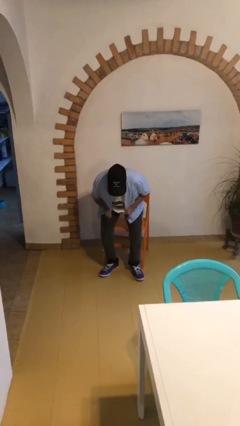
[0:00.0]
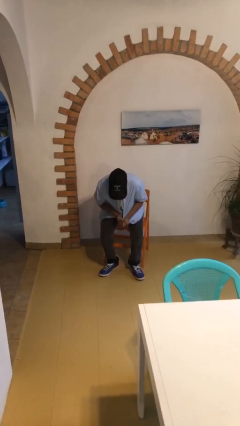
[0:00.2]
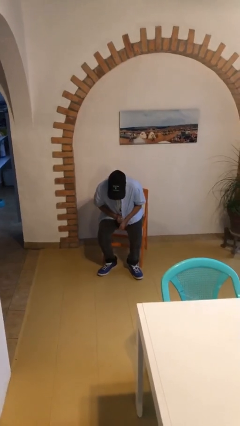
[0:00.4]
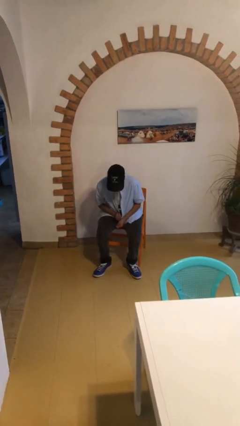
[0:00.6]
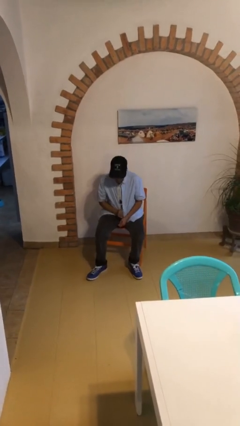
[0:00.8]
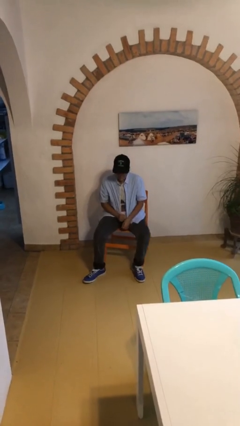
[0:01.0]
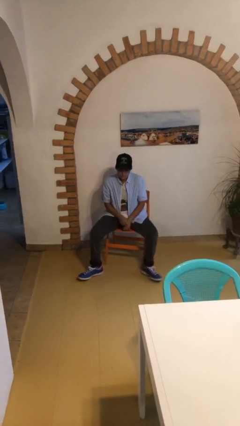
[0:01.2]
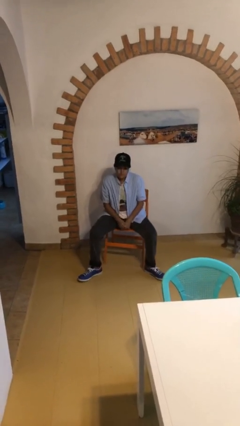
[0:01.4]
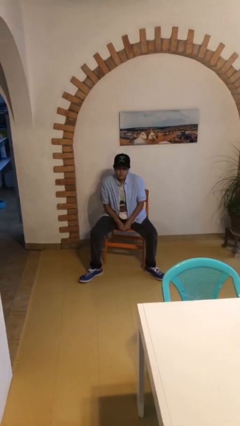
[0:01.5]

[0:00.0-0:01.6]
person sits down

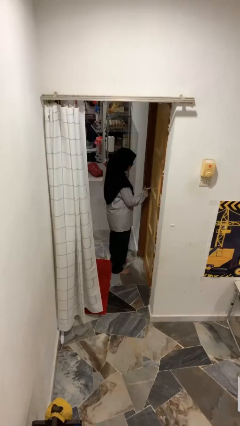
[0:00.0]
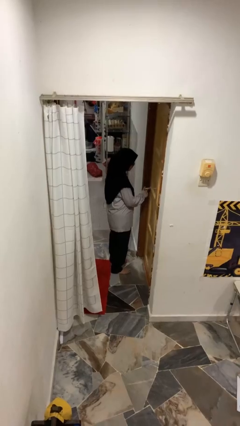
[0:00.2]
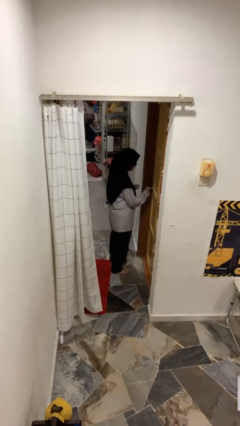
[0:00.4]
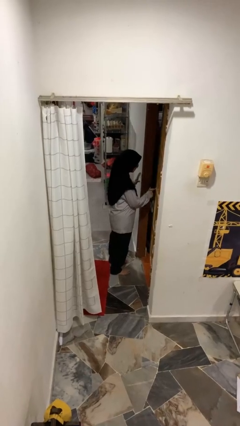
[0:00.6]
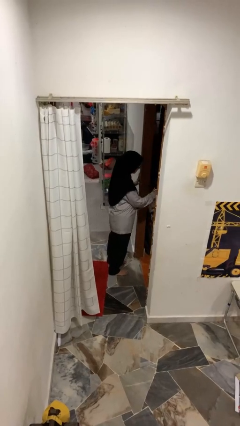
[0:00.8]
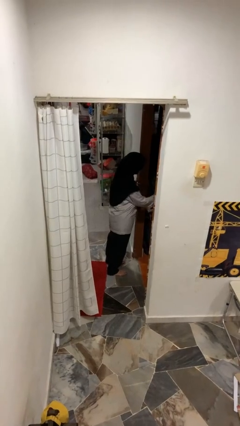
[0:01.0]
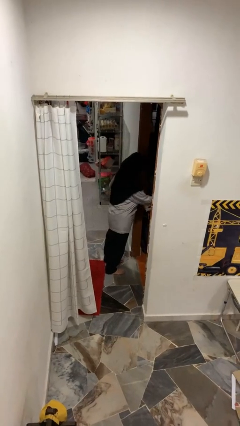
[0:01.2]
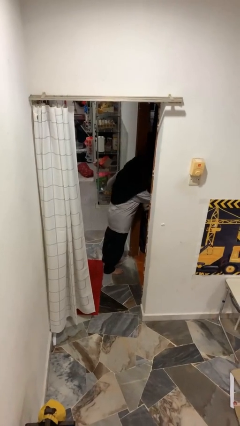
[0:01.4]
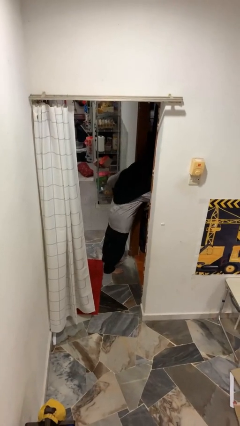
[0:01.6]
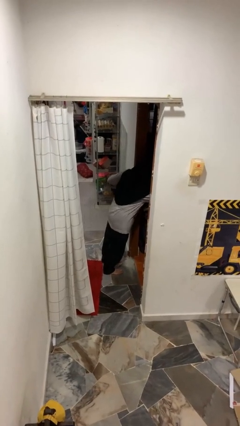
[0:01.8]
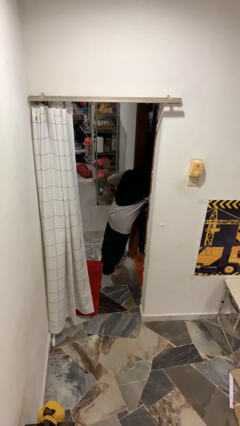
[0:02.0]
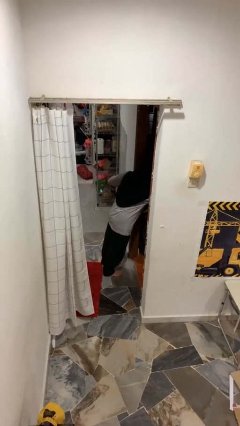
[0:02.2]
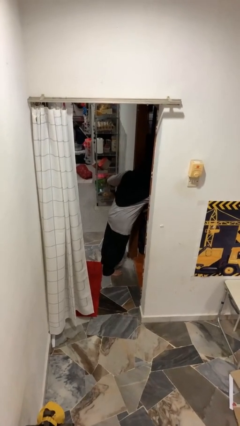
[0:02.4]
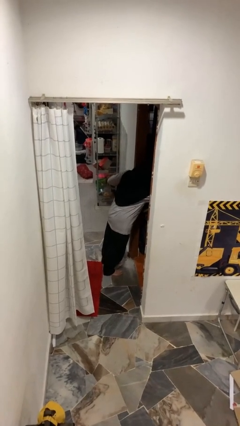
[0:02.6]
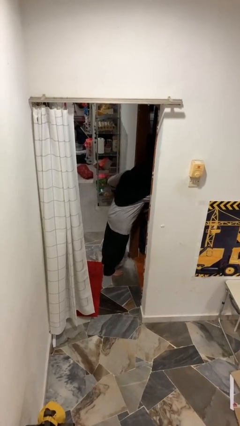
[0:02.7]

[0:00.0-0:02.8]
person opens facility door

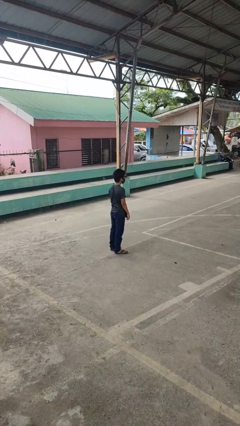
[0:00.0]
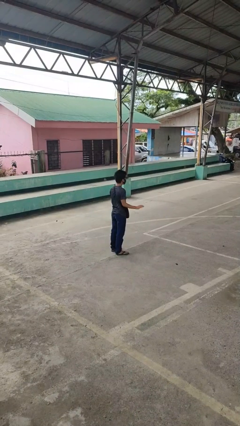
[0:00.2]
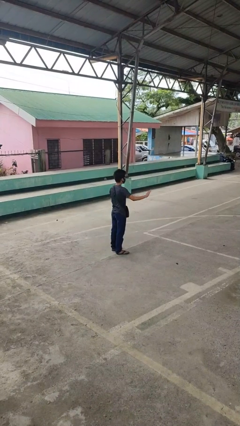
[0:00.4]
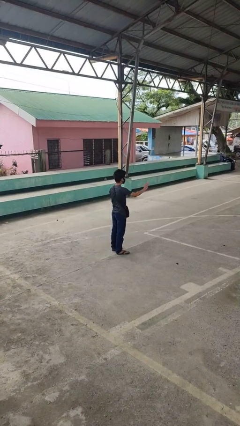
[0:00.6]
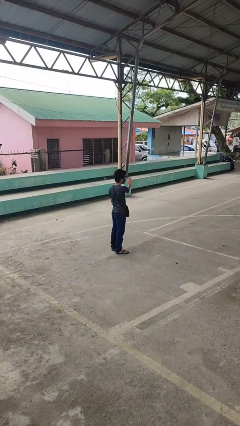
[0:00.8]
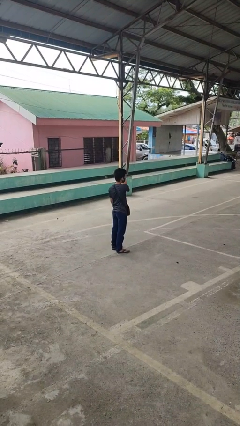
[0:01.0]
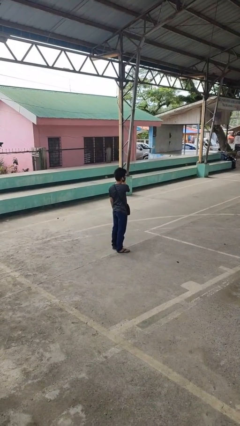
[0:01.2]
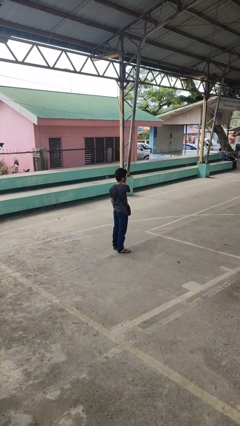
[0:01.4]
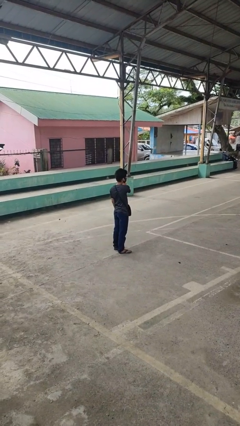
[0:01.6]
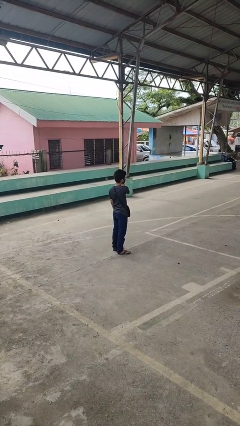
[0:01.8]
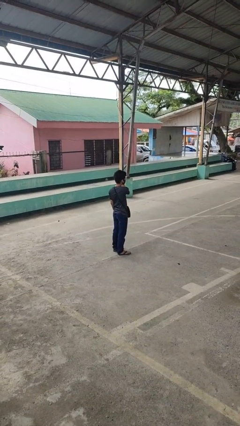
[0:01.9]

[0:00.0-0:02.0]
person gestures swipe left

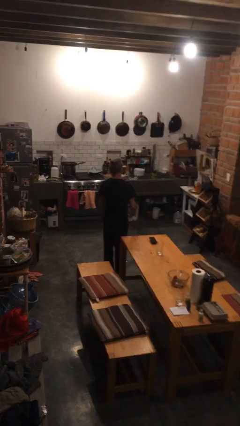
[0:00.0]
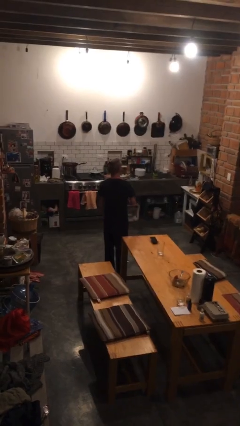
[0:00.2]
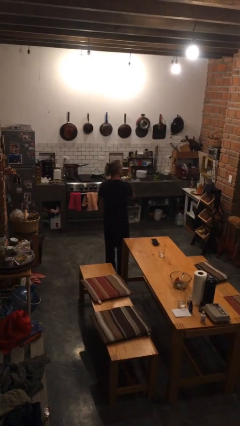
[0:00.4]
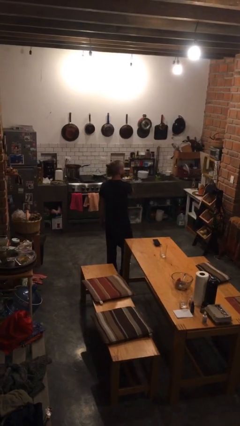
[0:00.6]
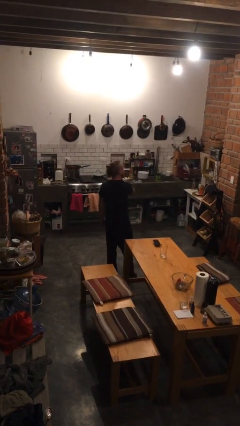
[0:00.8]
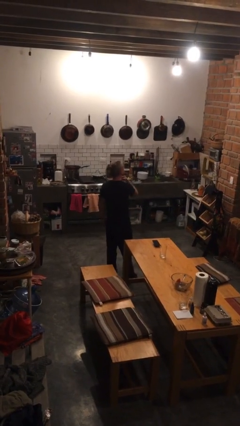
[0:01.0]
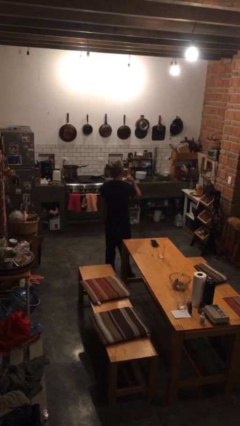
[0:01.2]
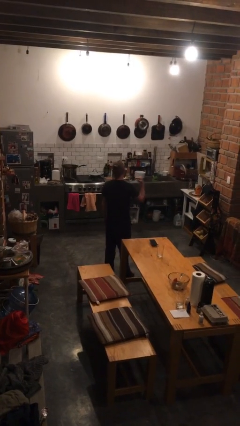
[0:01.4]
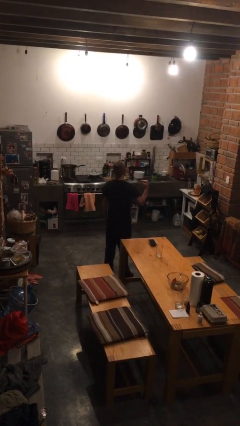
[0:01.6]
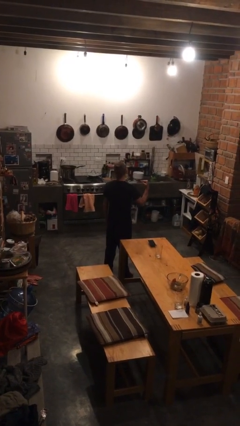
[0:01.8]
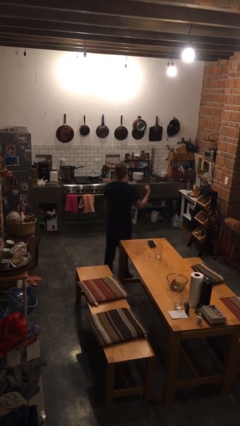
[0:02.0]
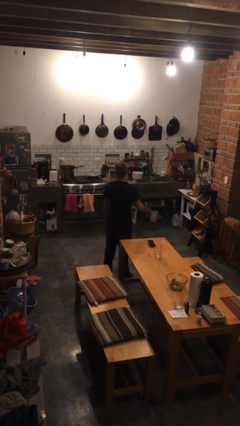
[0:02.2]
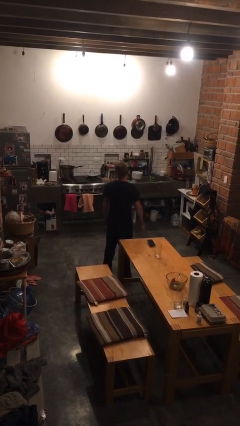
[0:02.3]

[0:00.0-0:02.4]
person gestures cut

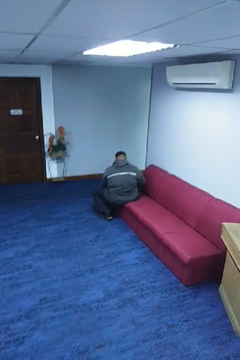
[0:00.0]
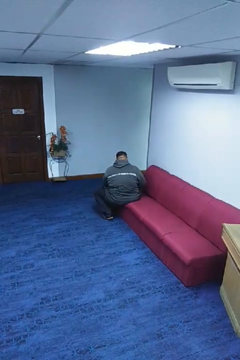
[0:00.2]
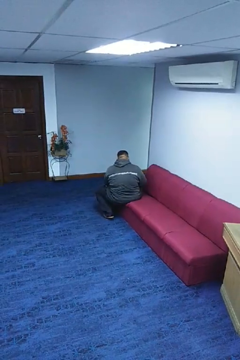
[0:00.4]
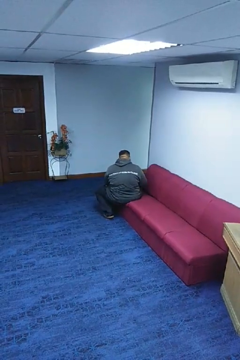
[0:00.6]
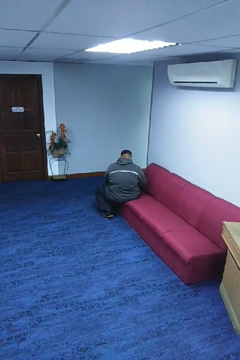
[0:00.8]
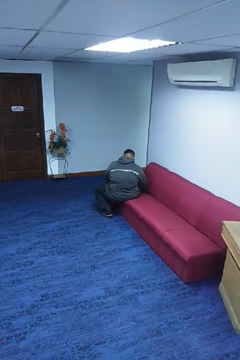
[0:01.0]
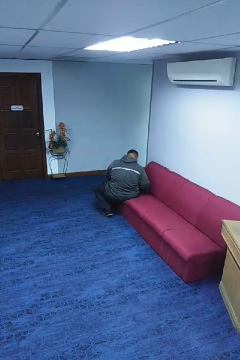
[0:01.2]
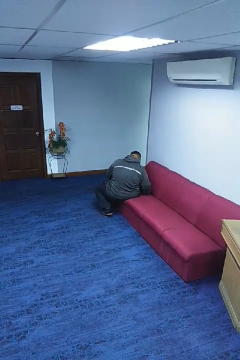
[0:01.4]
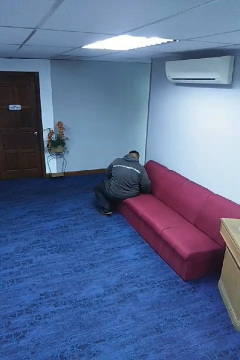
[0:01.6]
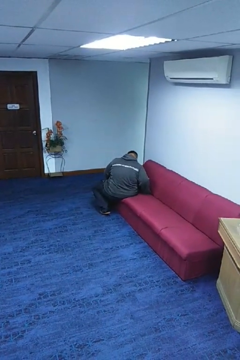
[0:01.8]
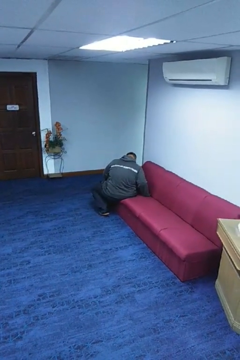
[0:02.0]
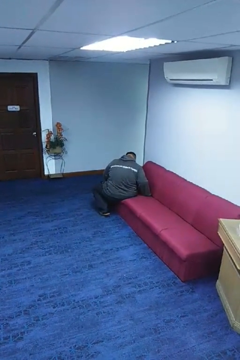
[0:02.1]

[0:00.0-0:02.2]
person searches in couch

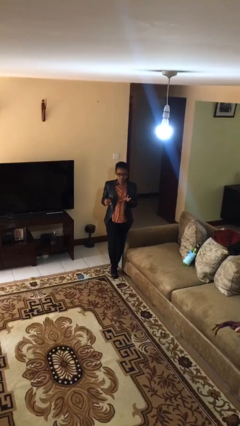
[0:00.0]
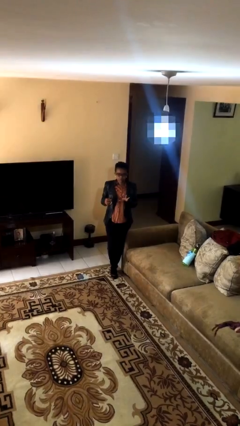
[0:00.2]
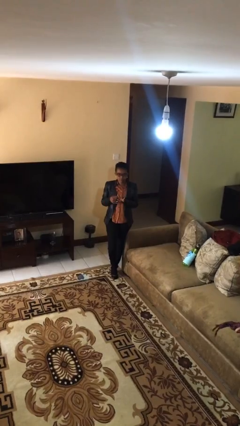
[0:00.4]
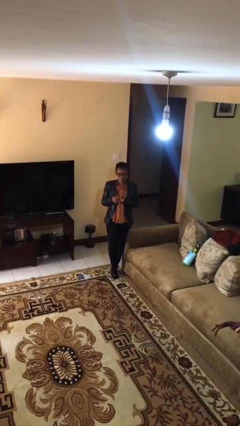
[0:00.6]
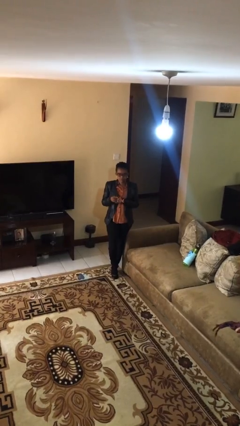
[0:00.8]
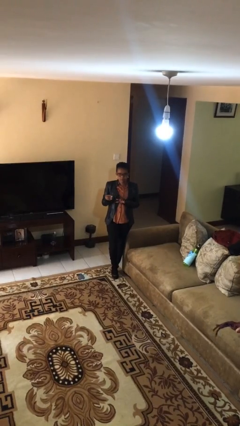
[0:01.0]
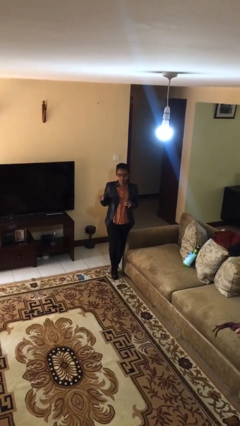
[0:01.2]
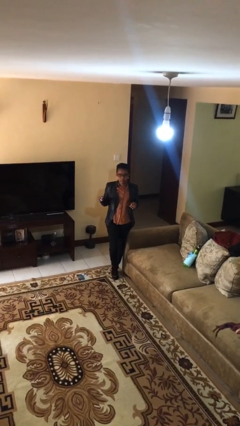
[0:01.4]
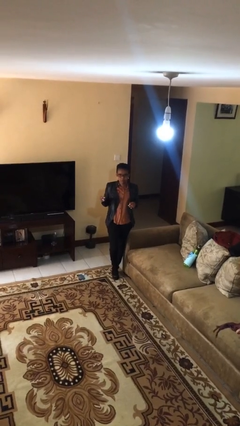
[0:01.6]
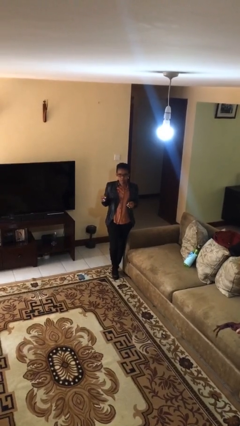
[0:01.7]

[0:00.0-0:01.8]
person takes off ring

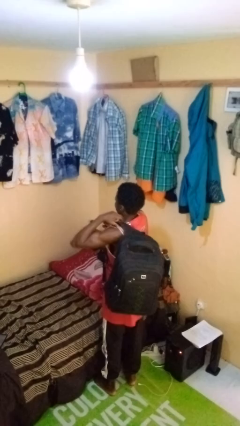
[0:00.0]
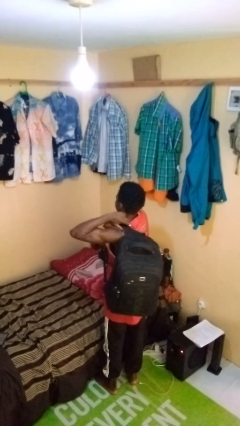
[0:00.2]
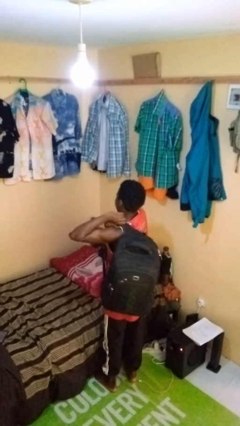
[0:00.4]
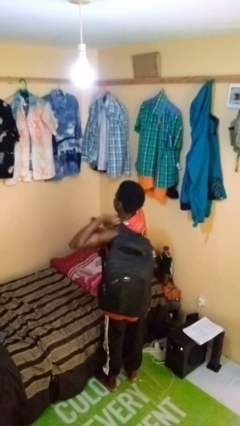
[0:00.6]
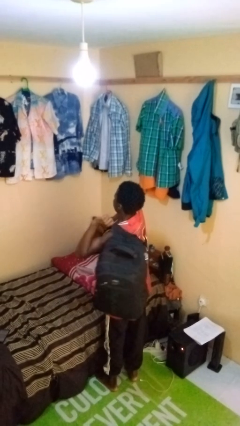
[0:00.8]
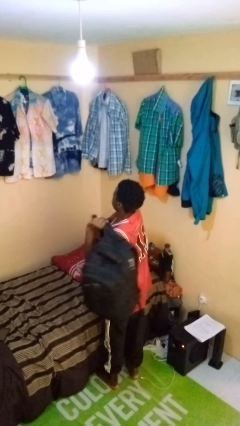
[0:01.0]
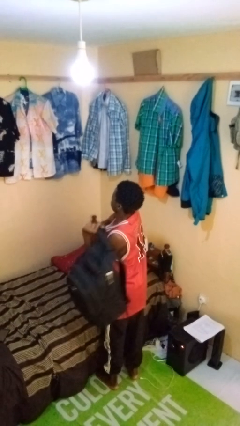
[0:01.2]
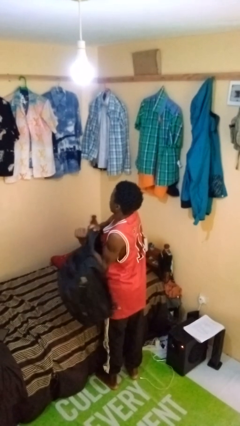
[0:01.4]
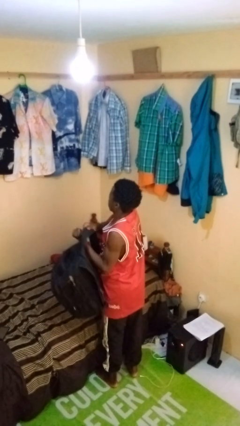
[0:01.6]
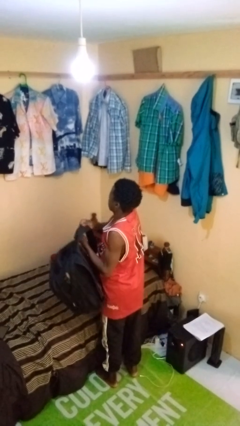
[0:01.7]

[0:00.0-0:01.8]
person takes off backpack

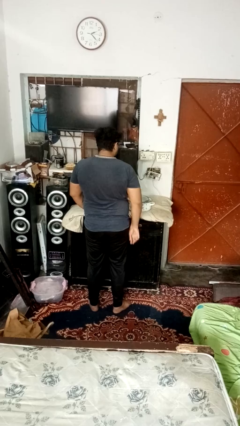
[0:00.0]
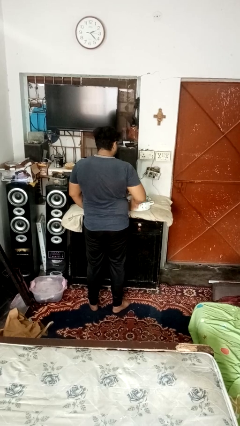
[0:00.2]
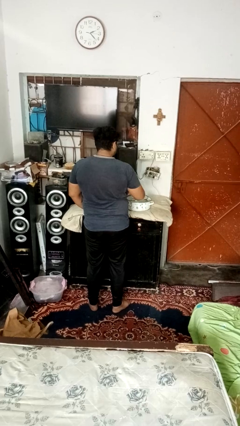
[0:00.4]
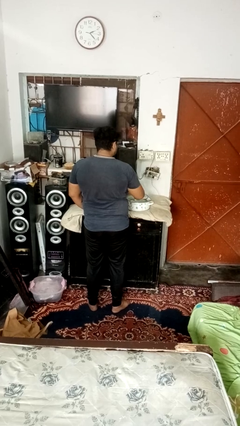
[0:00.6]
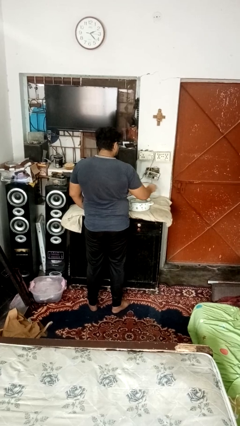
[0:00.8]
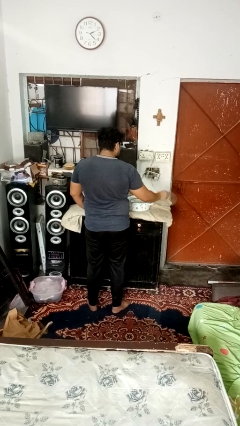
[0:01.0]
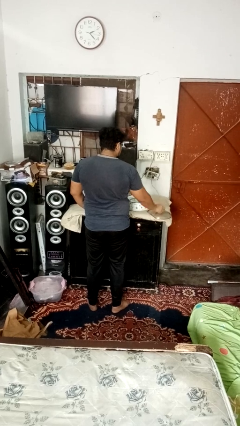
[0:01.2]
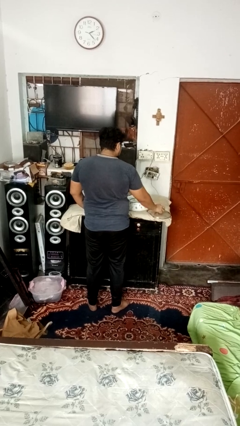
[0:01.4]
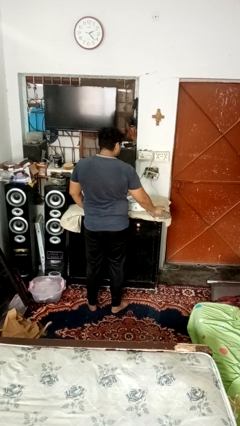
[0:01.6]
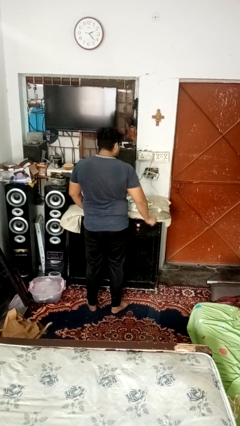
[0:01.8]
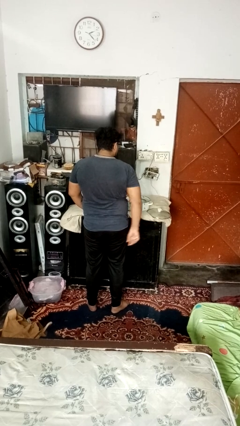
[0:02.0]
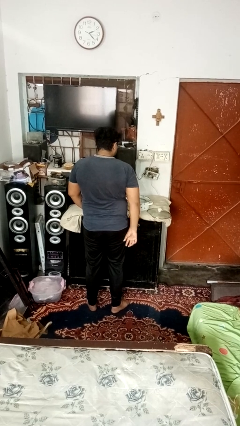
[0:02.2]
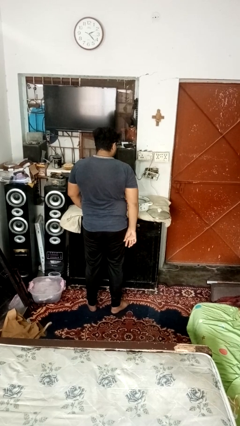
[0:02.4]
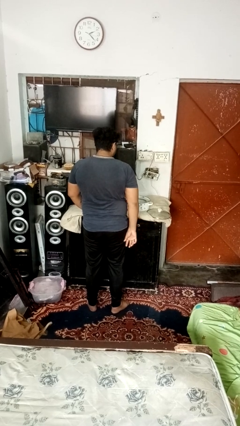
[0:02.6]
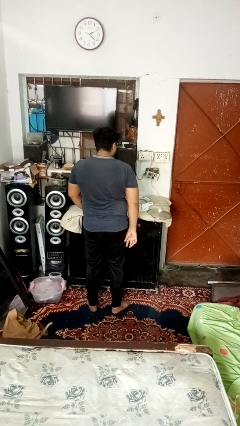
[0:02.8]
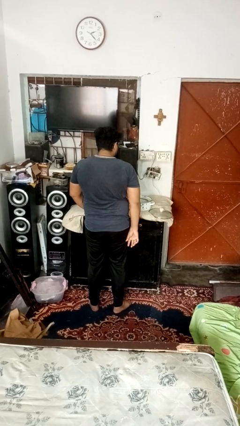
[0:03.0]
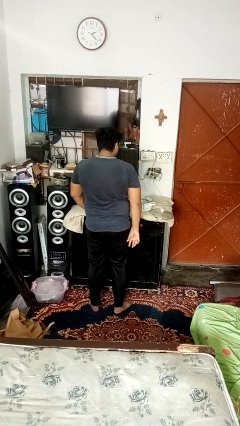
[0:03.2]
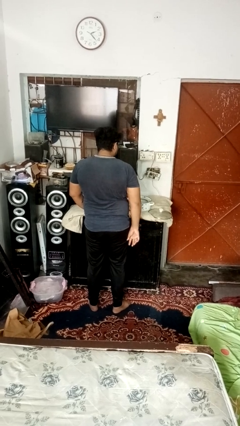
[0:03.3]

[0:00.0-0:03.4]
person opens jar
